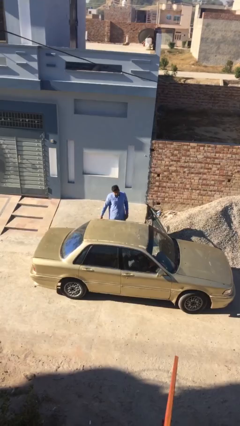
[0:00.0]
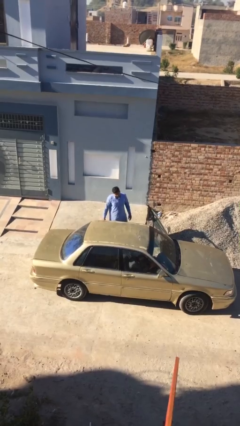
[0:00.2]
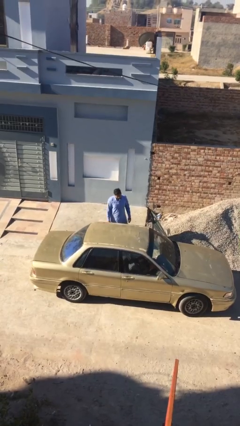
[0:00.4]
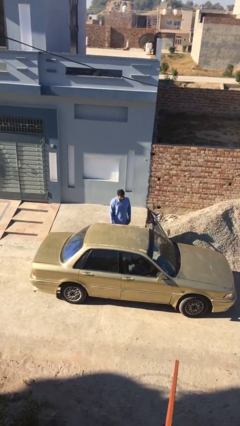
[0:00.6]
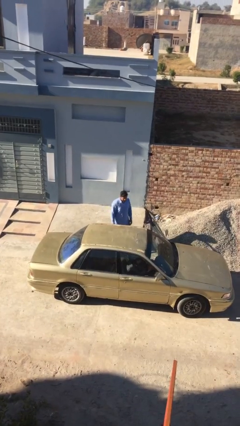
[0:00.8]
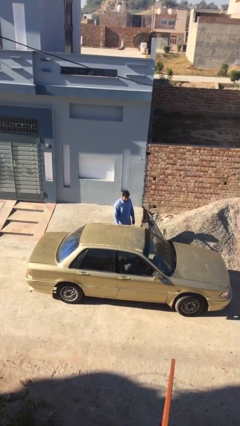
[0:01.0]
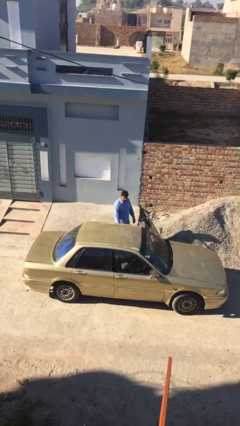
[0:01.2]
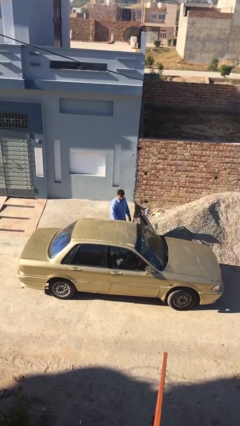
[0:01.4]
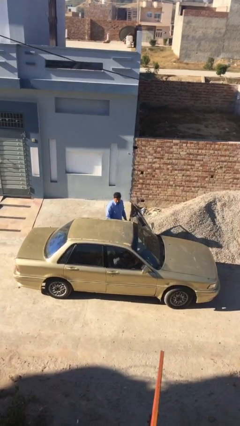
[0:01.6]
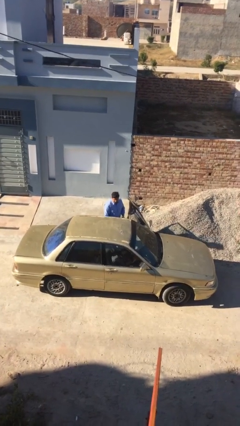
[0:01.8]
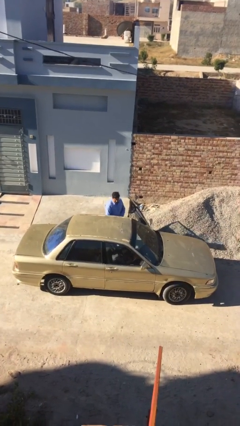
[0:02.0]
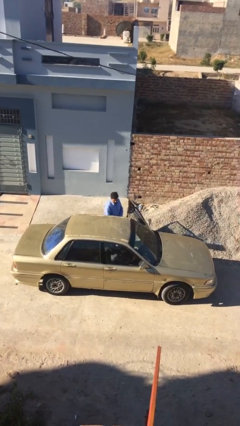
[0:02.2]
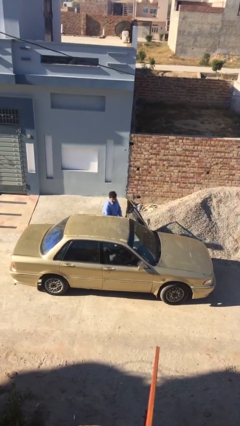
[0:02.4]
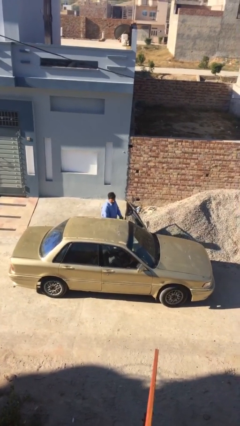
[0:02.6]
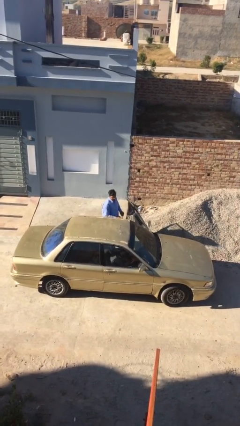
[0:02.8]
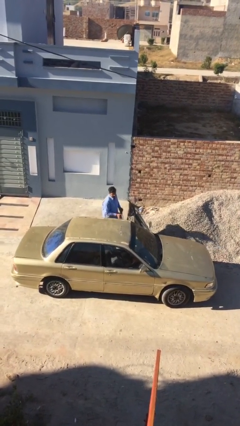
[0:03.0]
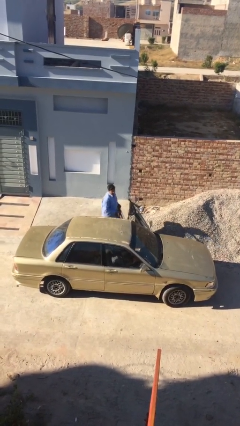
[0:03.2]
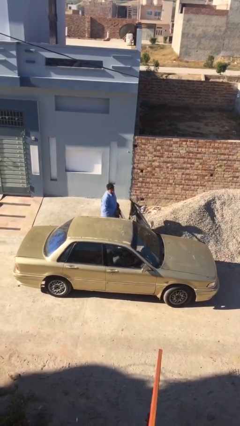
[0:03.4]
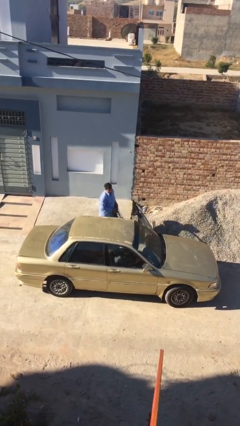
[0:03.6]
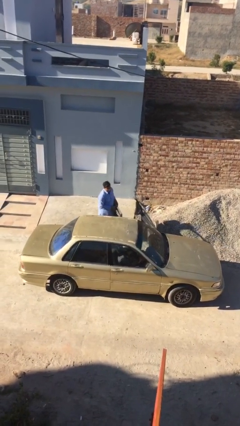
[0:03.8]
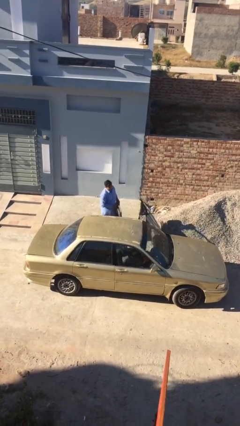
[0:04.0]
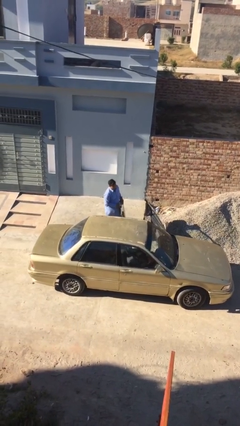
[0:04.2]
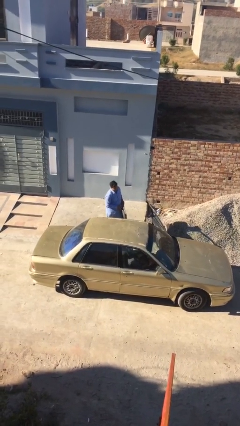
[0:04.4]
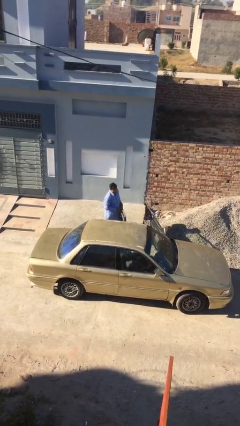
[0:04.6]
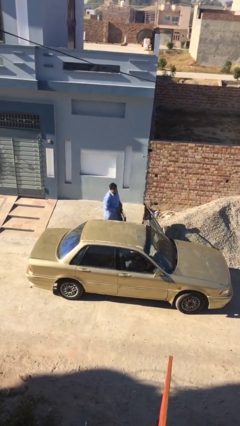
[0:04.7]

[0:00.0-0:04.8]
person unloads car

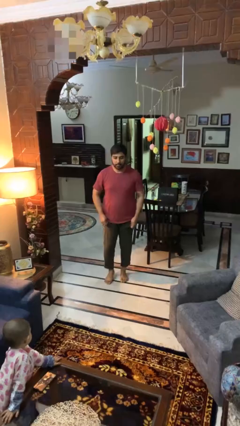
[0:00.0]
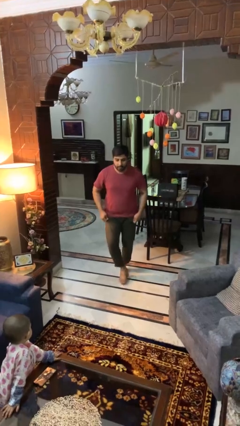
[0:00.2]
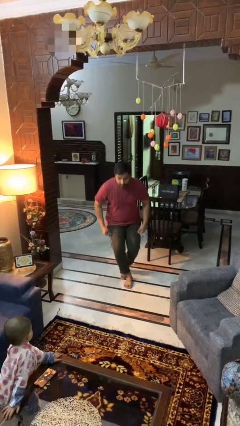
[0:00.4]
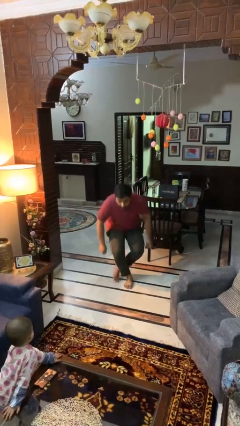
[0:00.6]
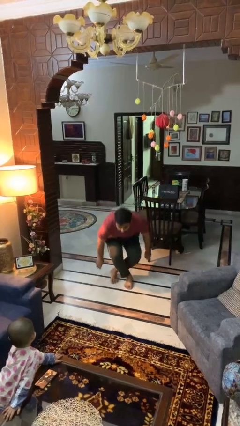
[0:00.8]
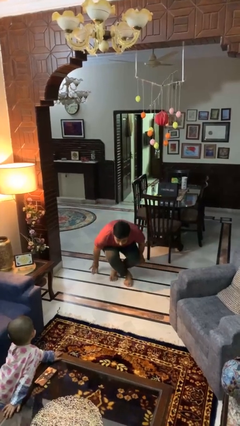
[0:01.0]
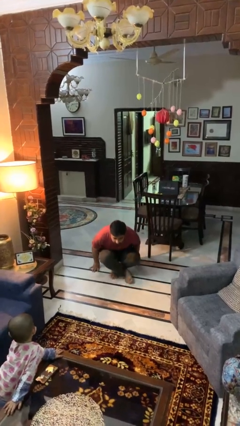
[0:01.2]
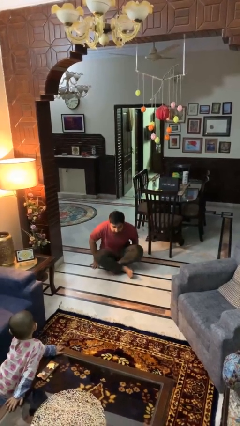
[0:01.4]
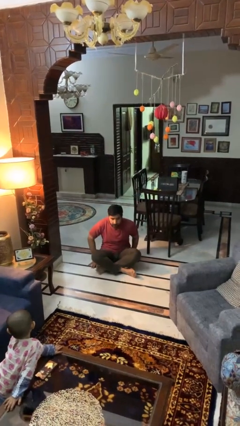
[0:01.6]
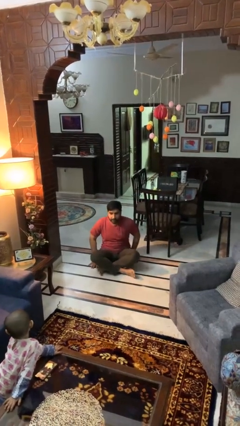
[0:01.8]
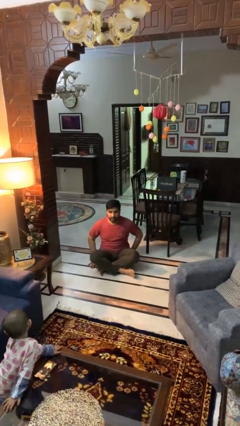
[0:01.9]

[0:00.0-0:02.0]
person sits crisscross

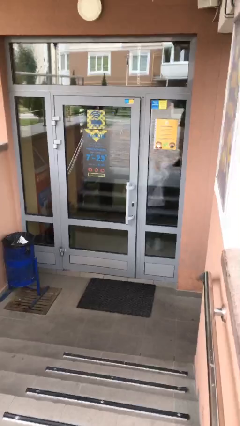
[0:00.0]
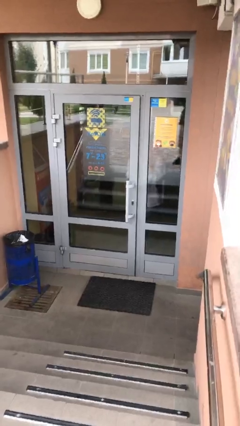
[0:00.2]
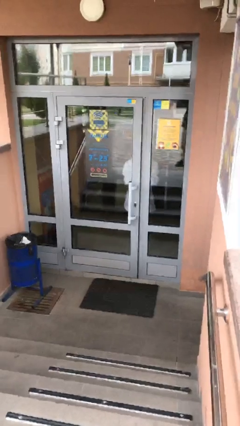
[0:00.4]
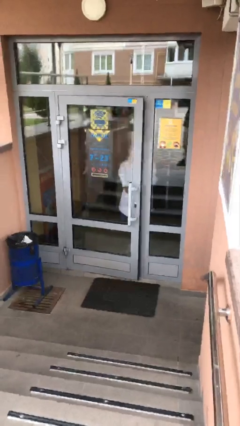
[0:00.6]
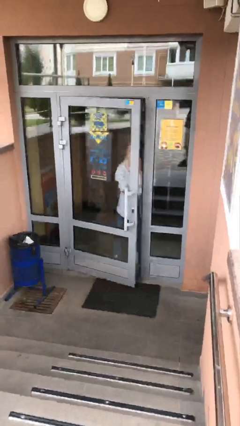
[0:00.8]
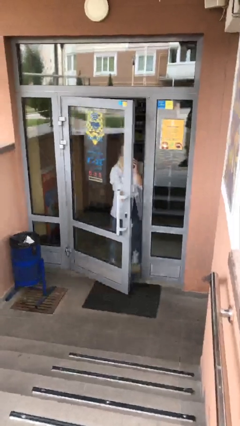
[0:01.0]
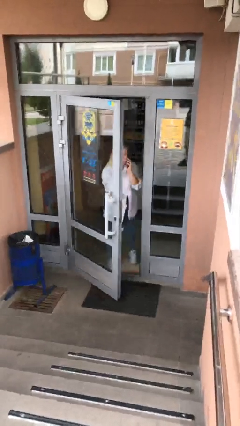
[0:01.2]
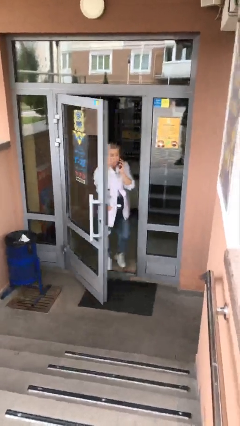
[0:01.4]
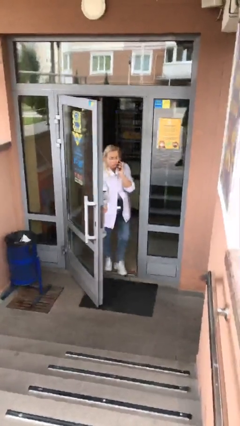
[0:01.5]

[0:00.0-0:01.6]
person opens facility door

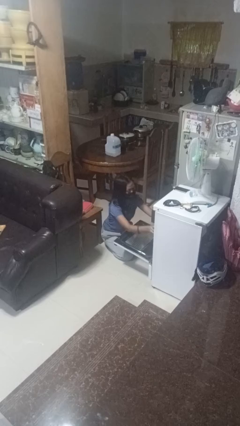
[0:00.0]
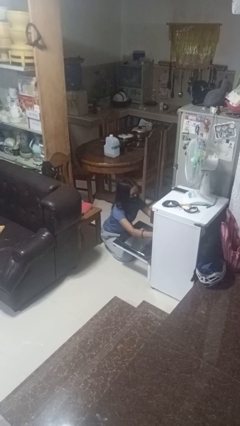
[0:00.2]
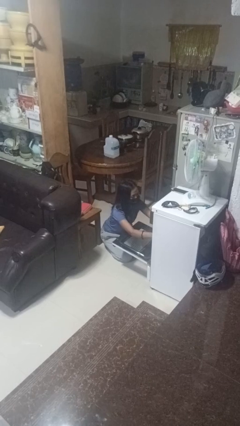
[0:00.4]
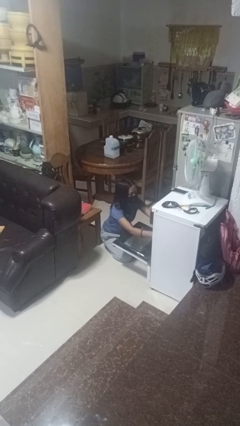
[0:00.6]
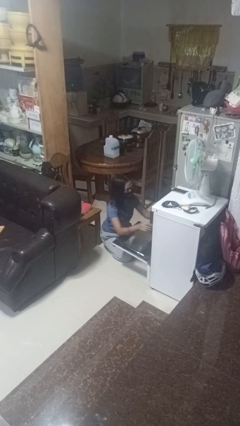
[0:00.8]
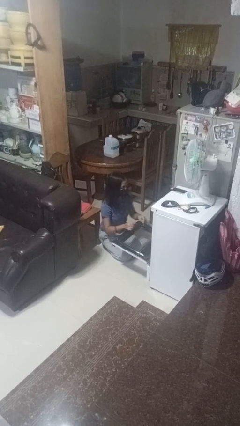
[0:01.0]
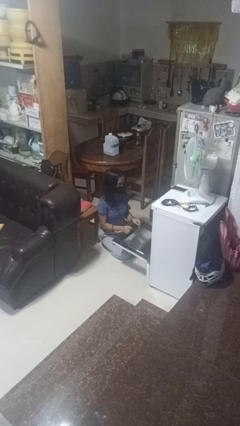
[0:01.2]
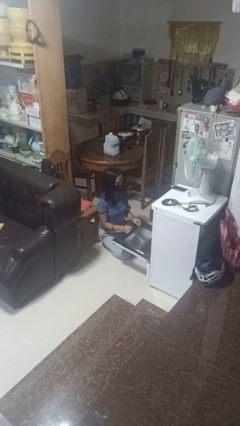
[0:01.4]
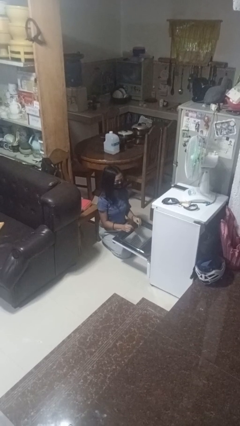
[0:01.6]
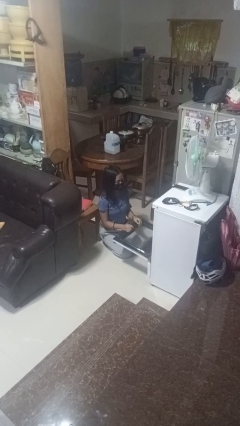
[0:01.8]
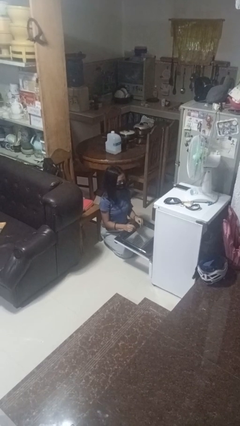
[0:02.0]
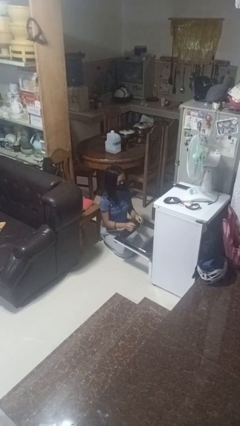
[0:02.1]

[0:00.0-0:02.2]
person puts object into oven

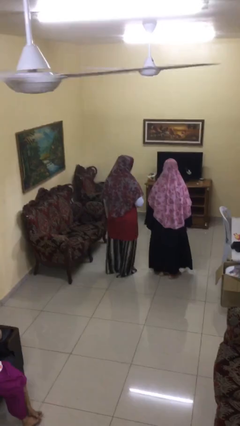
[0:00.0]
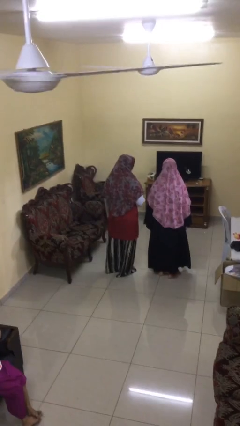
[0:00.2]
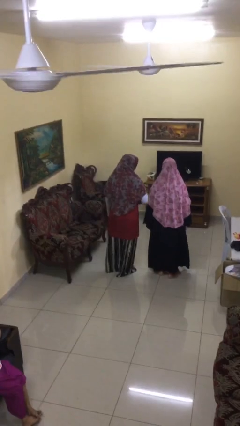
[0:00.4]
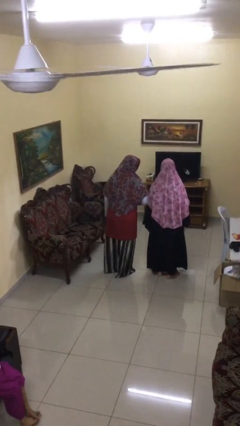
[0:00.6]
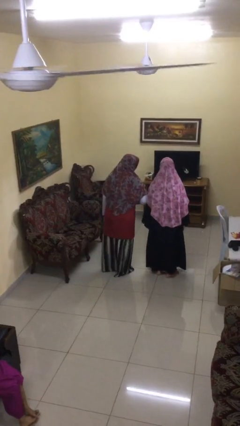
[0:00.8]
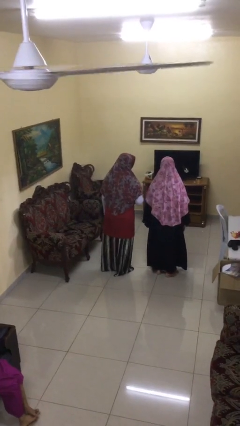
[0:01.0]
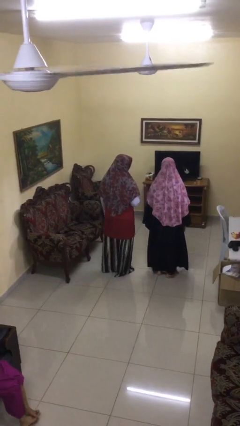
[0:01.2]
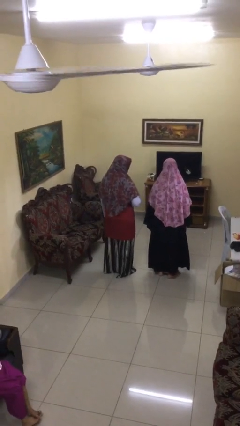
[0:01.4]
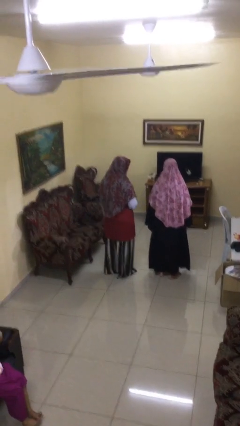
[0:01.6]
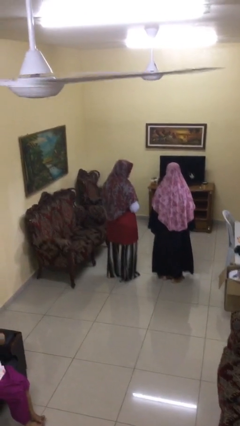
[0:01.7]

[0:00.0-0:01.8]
person nudges person with elbow

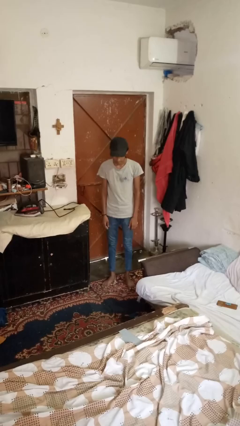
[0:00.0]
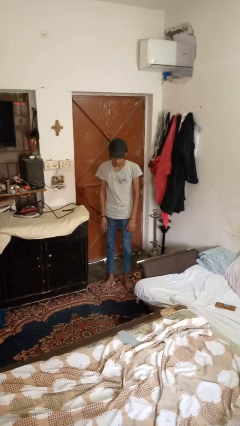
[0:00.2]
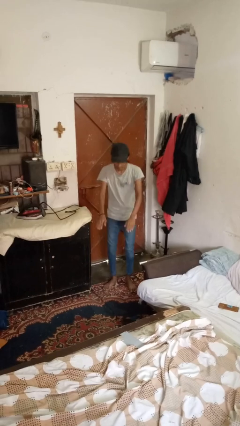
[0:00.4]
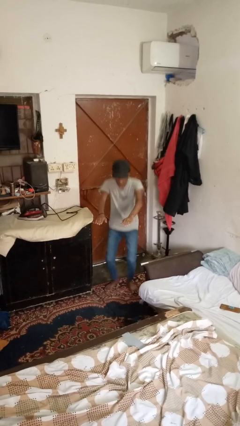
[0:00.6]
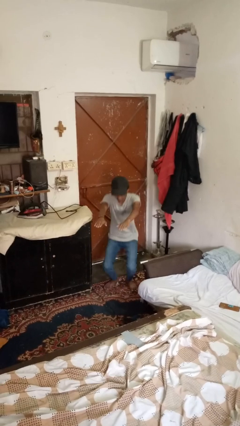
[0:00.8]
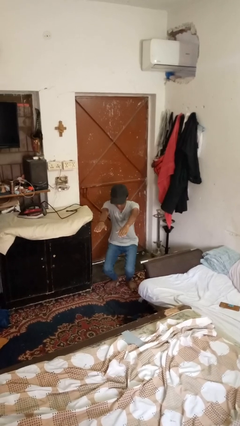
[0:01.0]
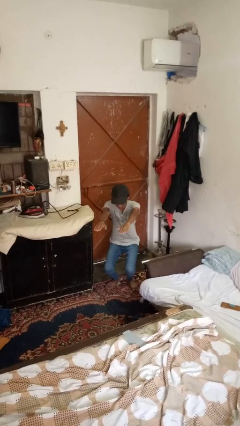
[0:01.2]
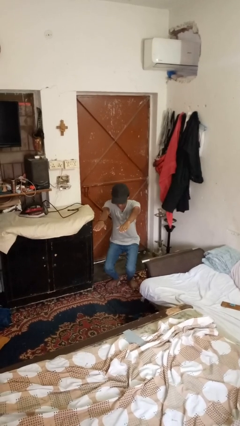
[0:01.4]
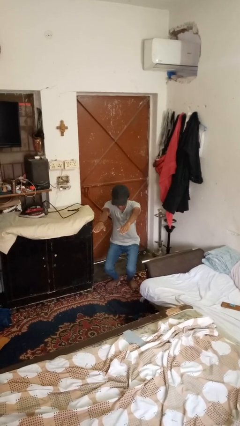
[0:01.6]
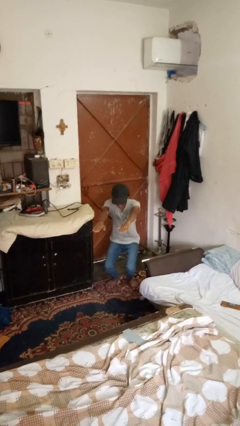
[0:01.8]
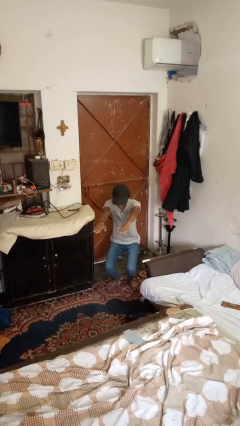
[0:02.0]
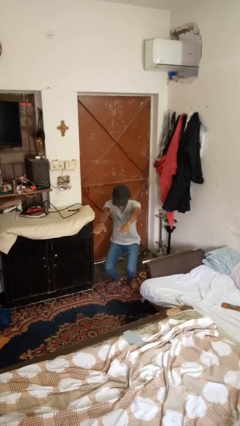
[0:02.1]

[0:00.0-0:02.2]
person squats

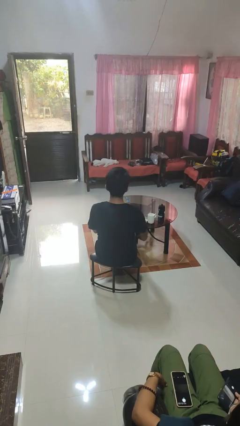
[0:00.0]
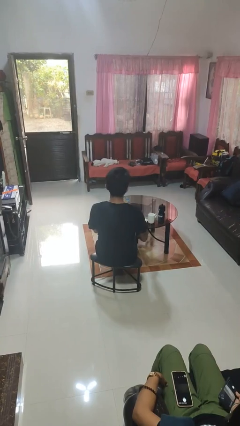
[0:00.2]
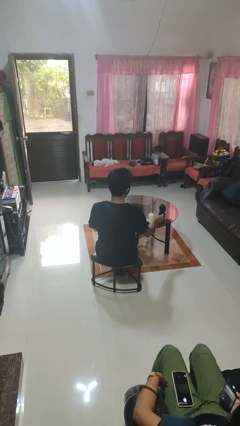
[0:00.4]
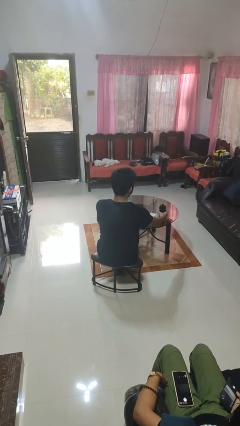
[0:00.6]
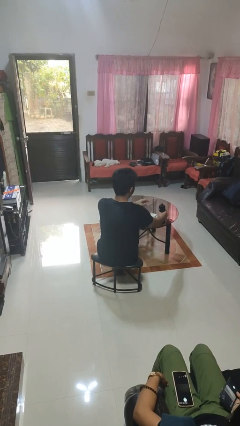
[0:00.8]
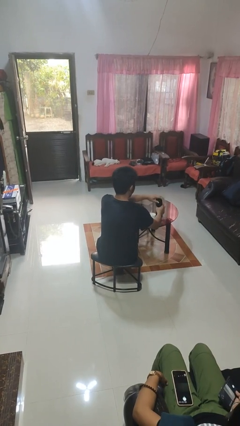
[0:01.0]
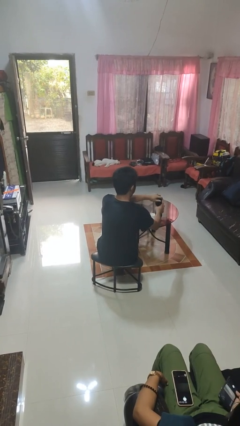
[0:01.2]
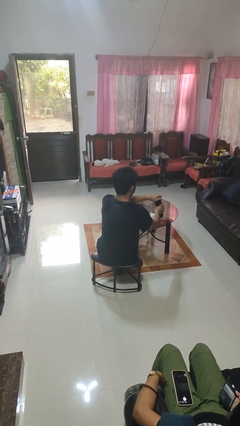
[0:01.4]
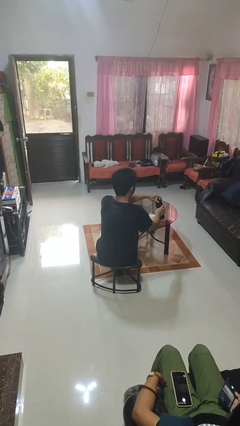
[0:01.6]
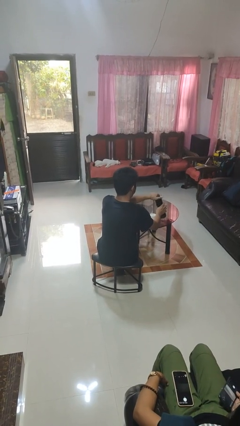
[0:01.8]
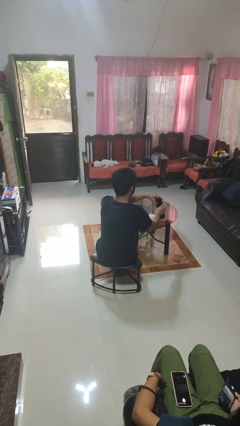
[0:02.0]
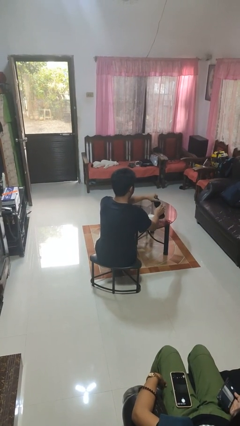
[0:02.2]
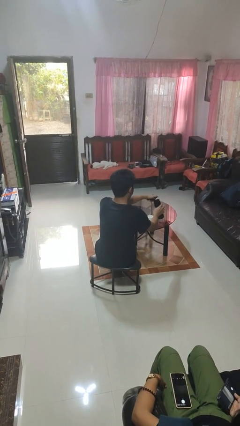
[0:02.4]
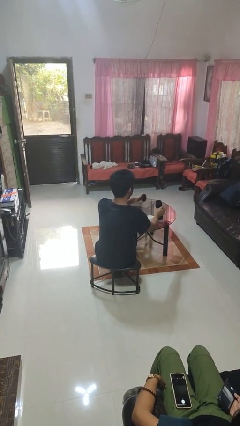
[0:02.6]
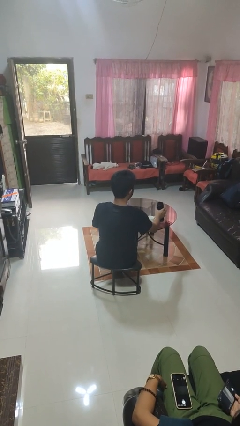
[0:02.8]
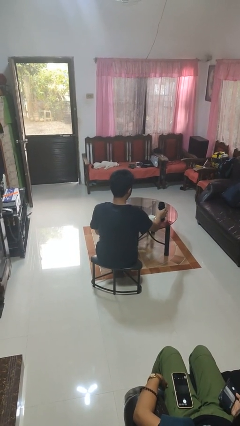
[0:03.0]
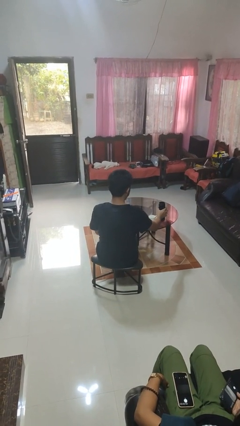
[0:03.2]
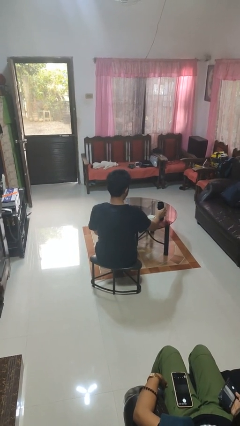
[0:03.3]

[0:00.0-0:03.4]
person unscrews lid from bottle
